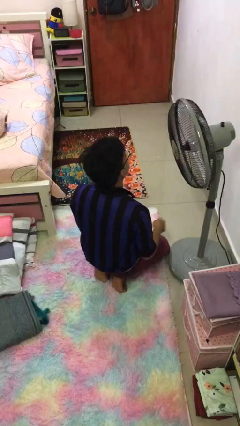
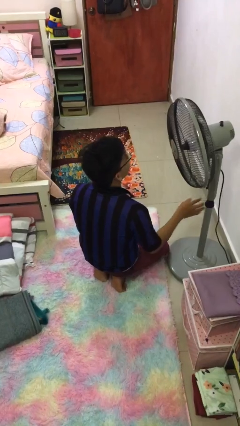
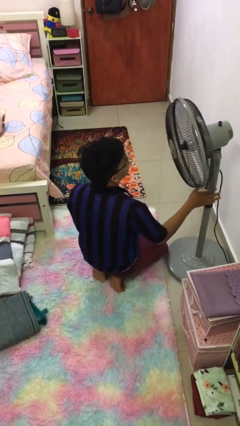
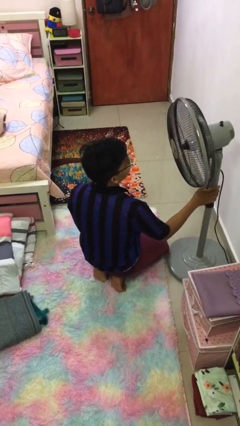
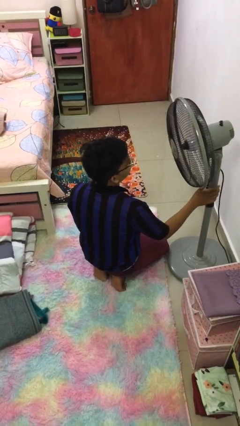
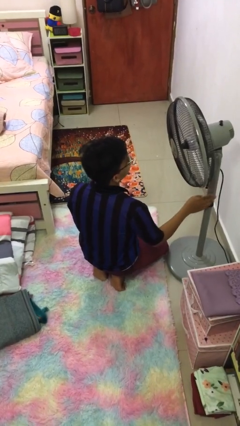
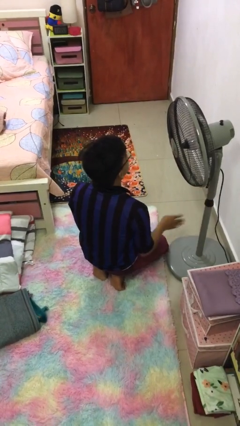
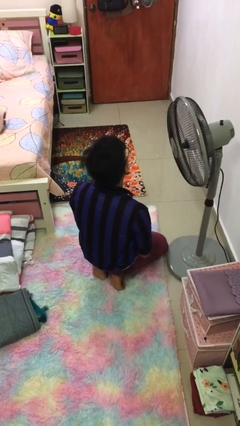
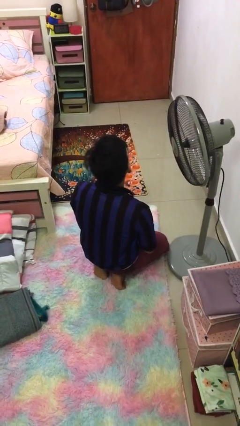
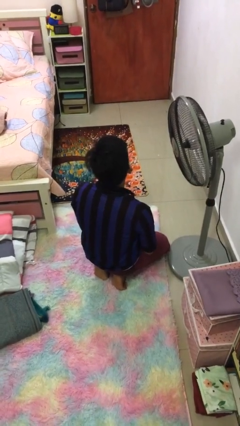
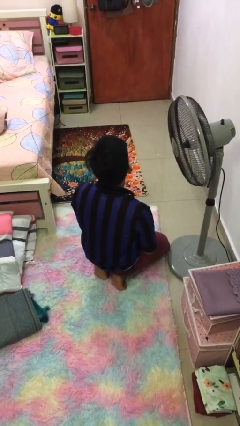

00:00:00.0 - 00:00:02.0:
person turns on fan

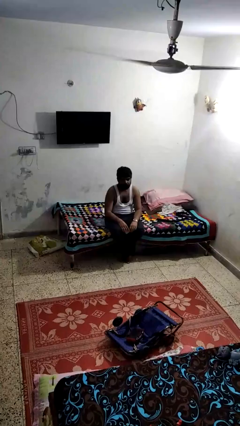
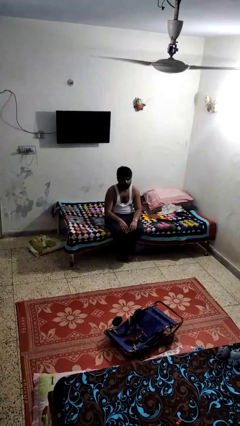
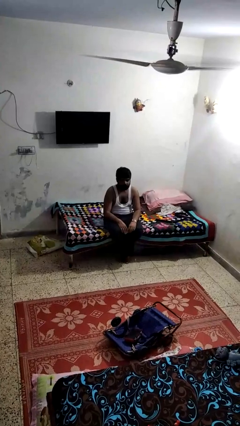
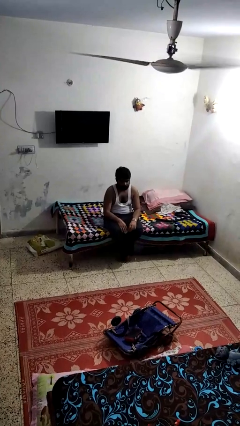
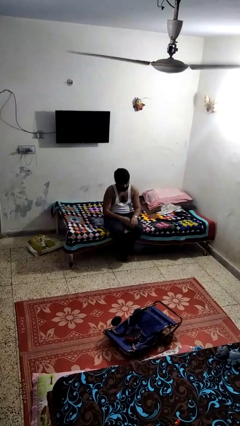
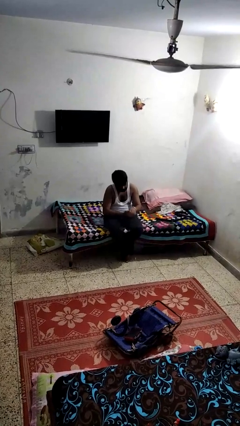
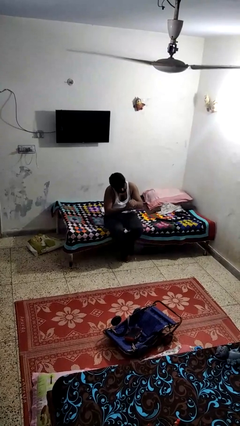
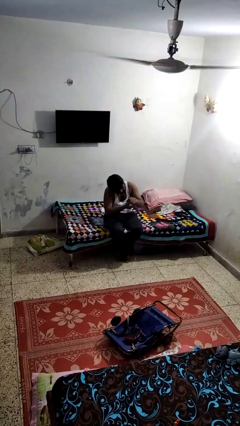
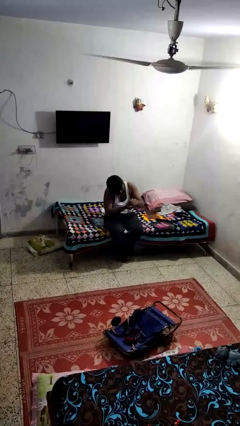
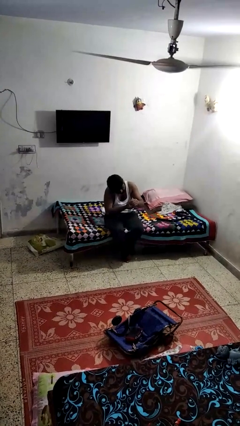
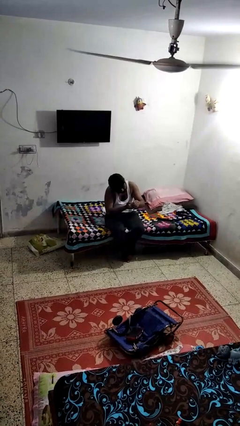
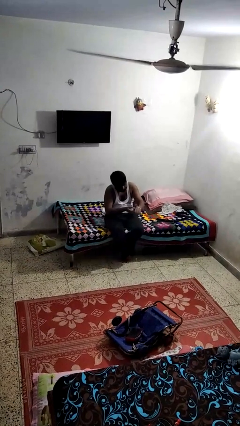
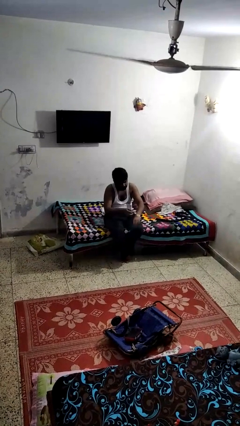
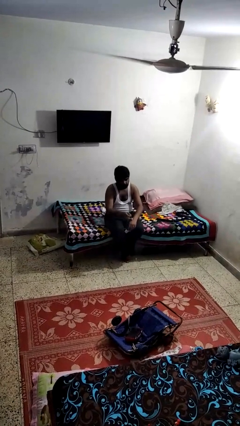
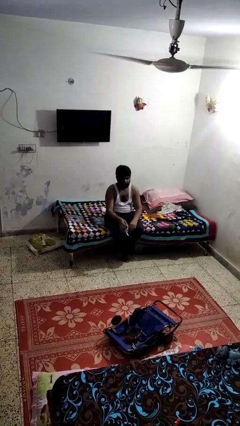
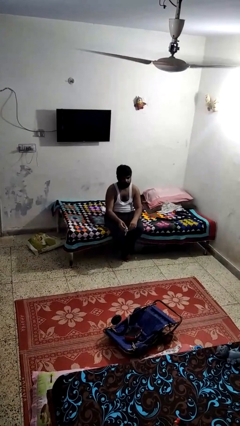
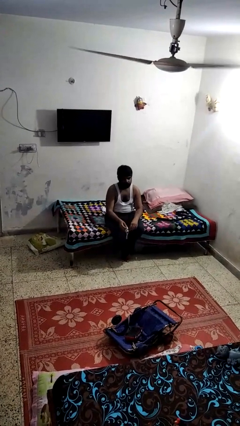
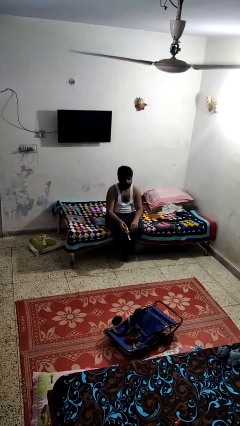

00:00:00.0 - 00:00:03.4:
person takes off wristwatch

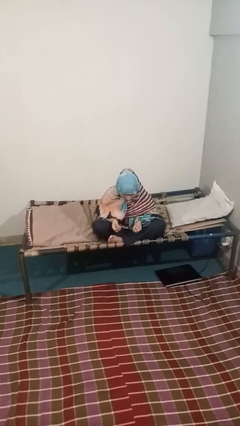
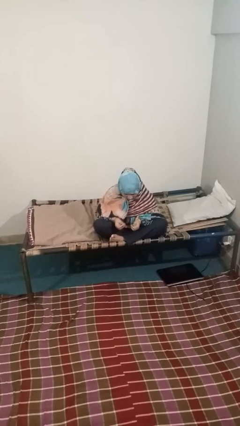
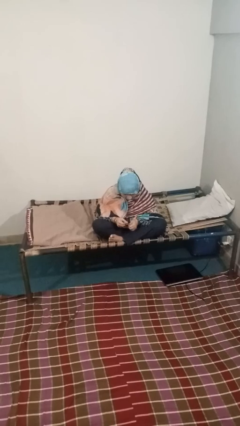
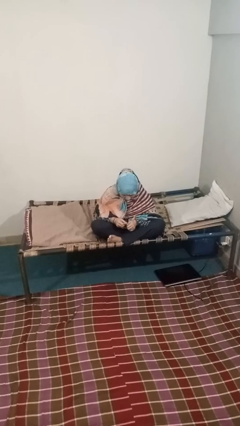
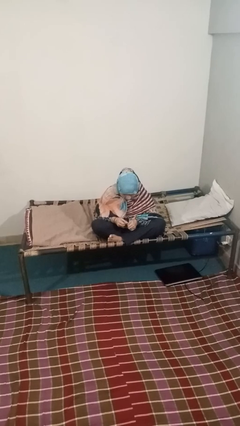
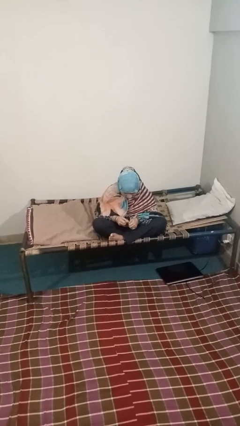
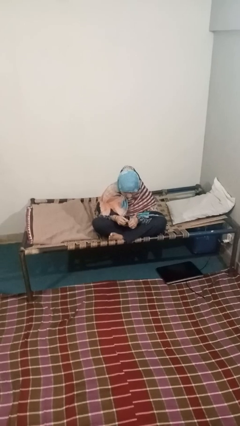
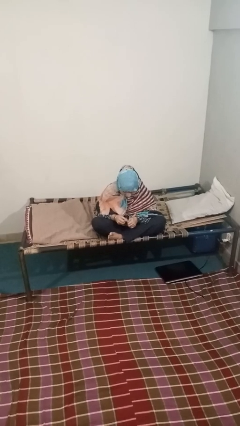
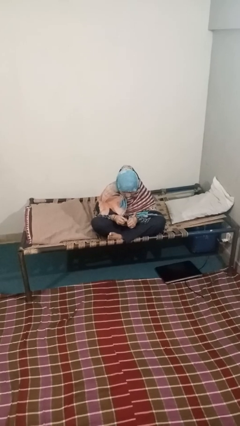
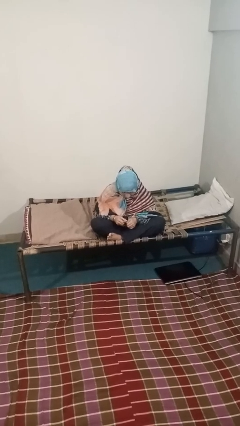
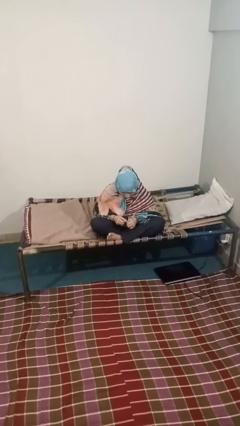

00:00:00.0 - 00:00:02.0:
person files fingernails

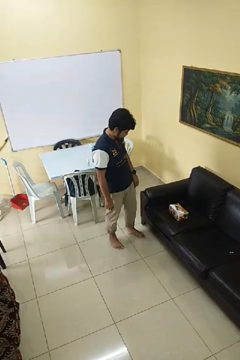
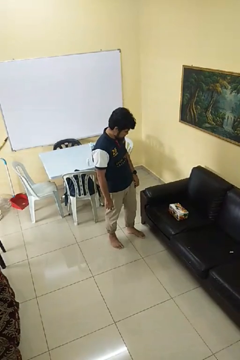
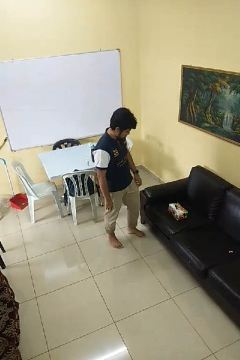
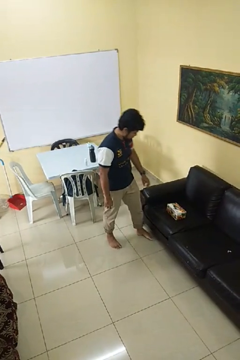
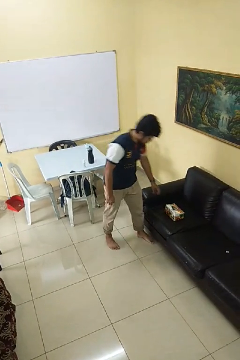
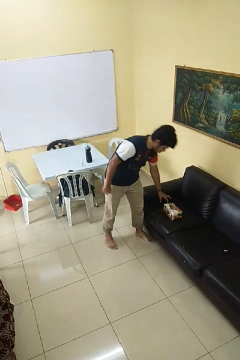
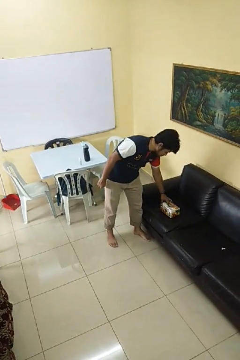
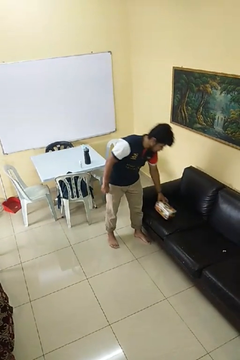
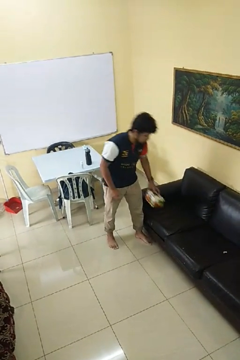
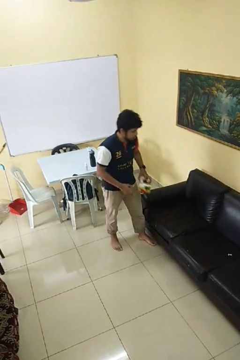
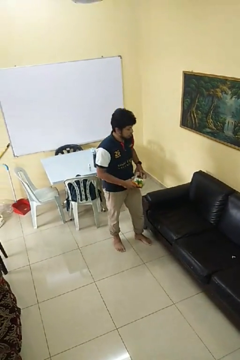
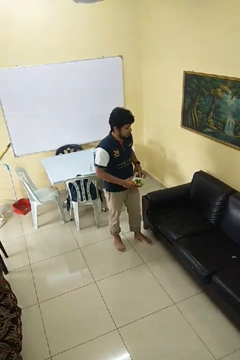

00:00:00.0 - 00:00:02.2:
person picks up object from couch

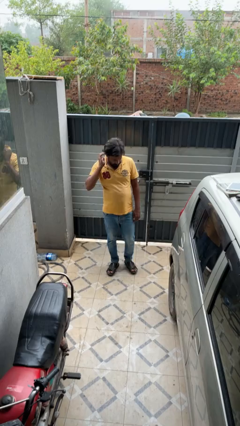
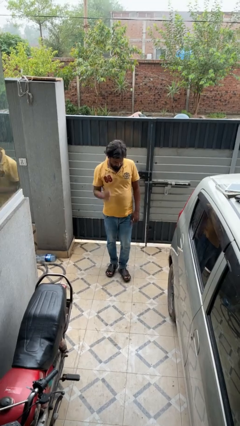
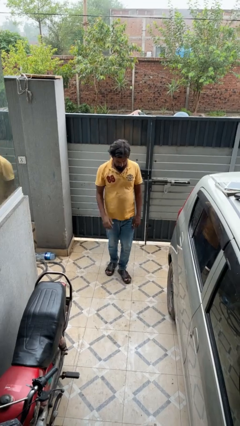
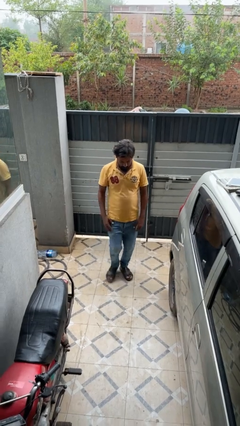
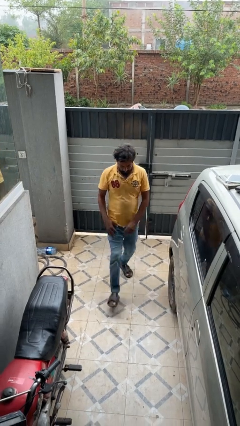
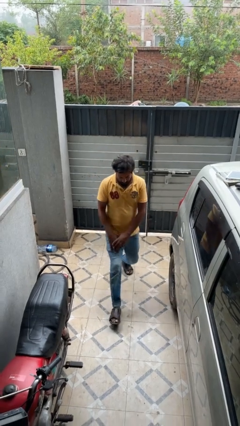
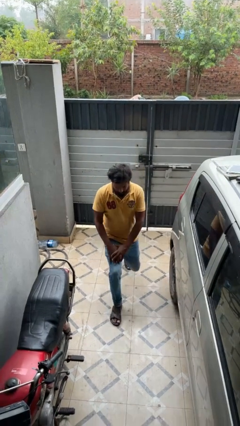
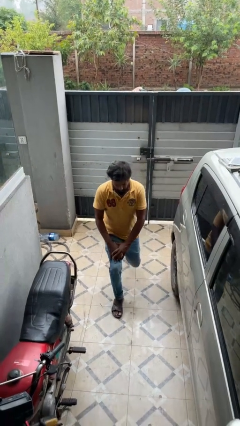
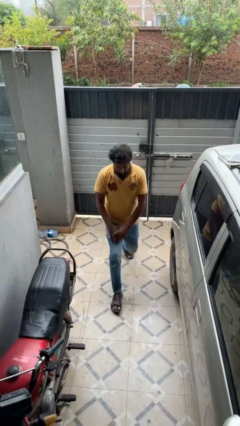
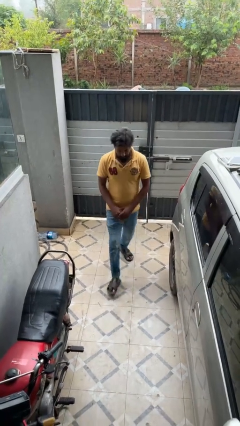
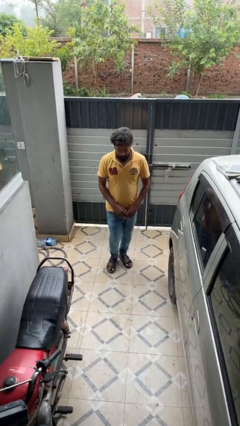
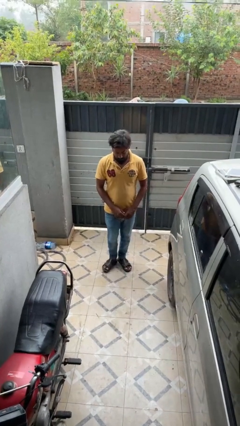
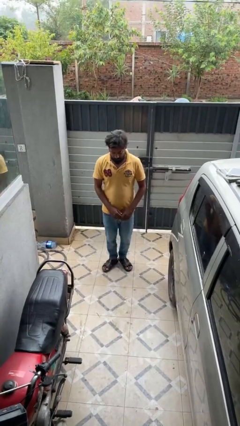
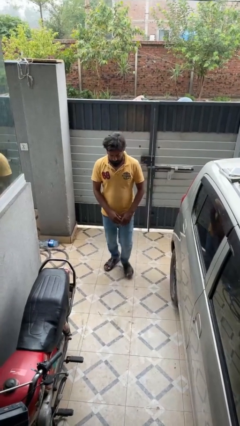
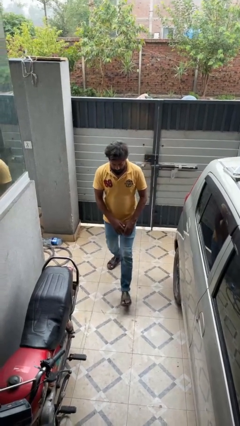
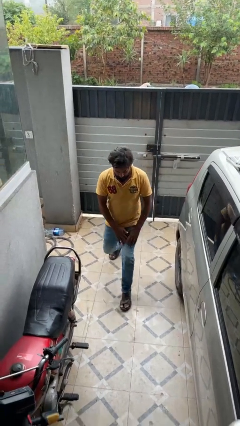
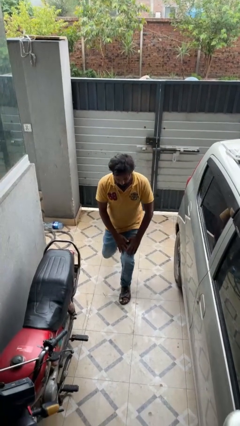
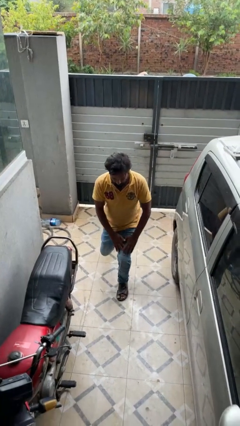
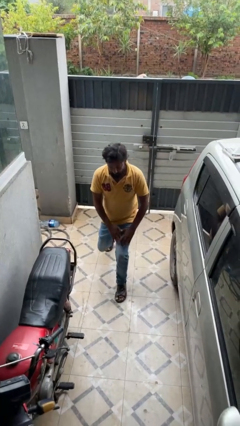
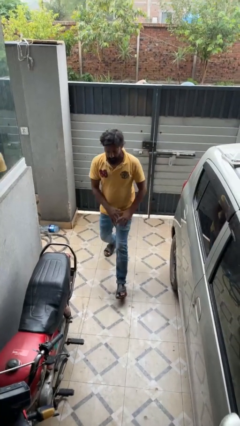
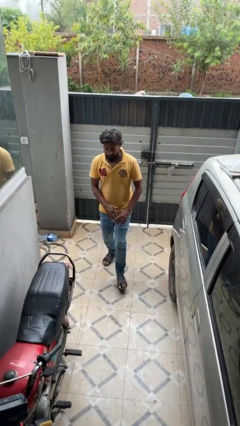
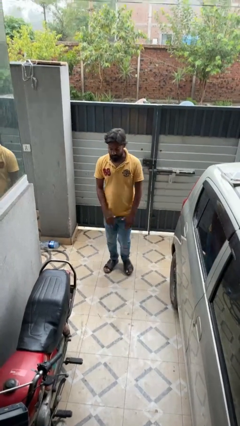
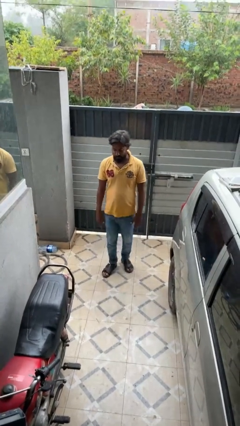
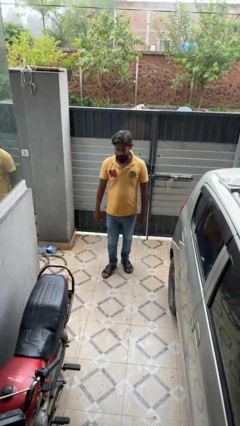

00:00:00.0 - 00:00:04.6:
person exercises with lunges

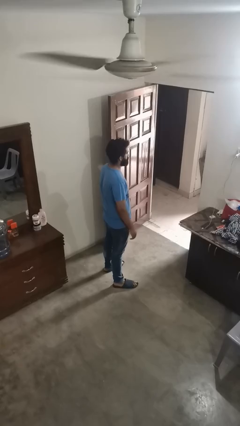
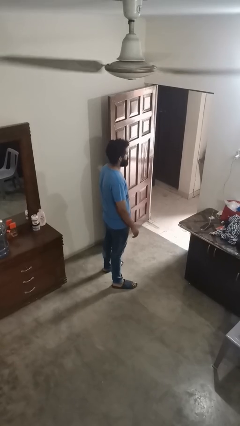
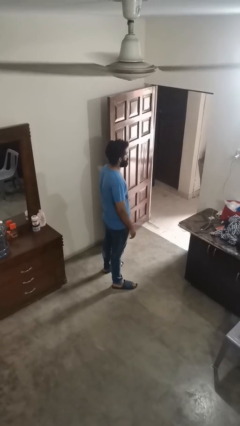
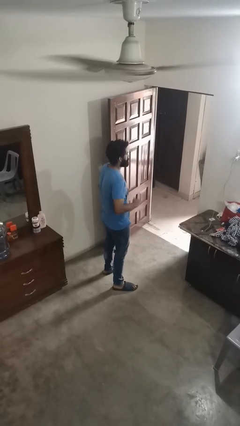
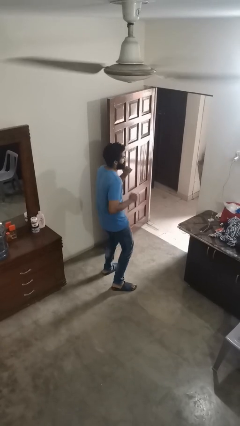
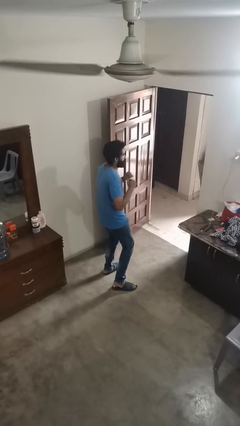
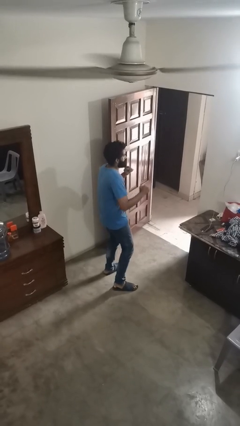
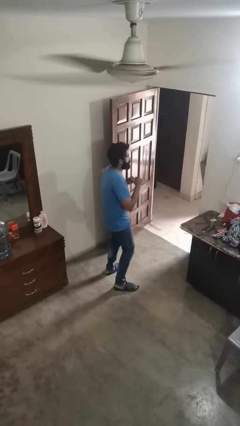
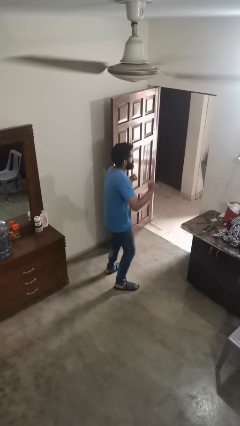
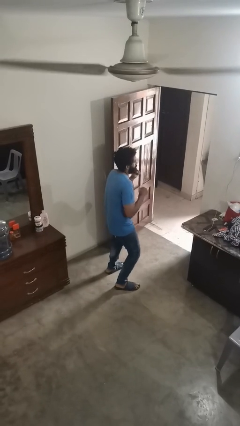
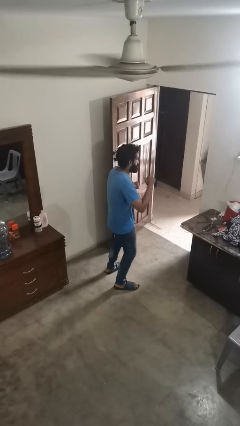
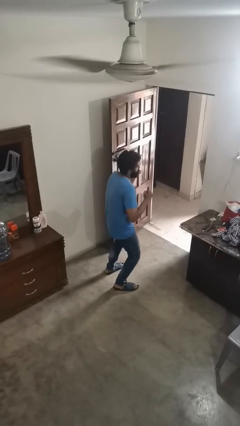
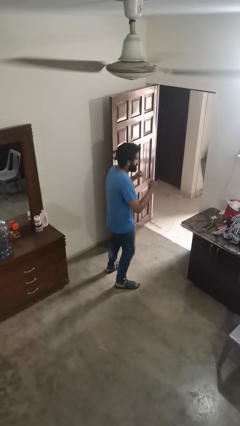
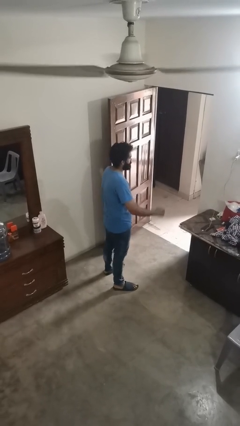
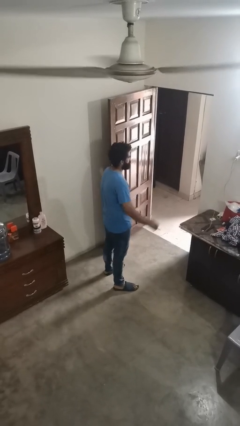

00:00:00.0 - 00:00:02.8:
person dances in place

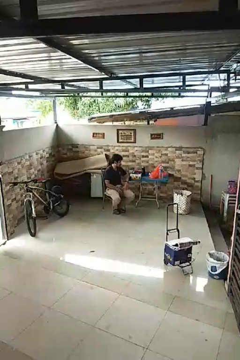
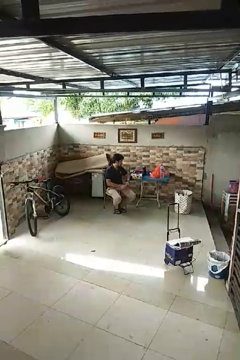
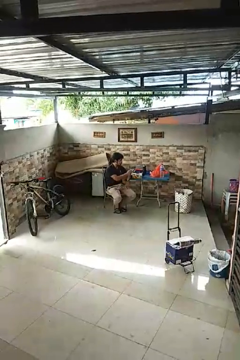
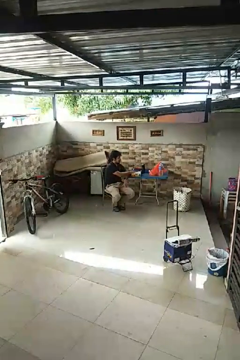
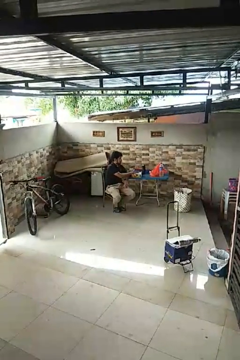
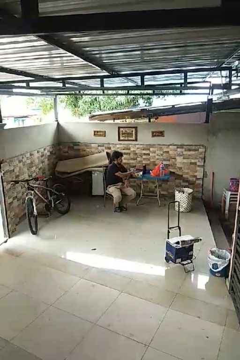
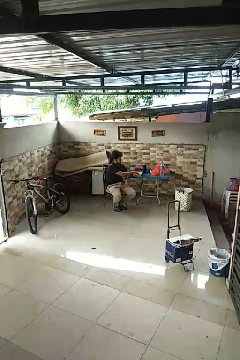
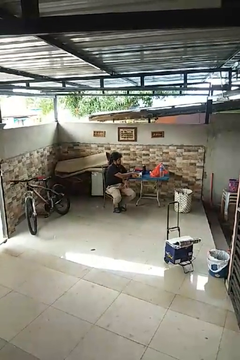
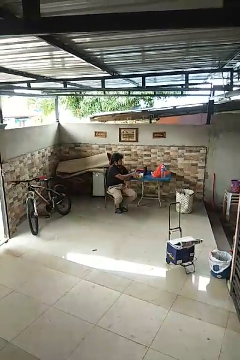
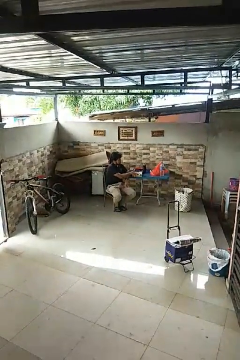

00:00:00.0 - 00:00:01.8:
person taps object with finger
